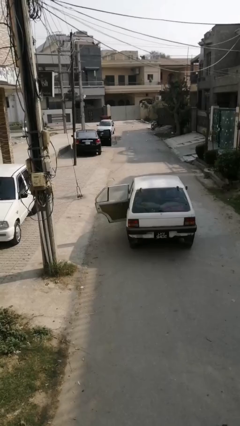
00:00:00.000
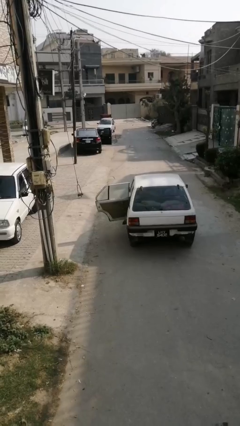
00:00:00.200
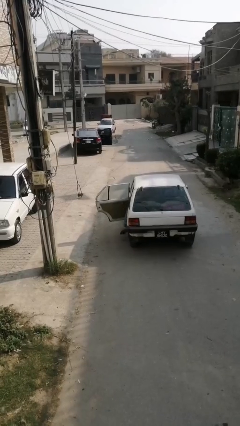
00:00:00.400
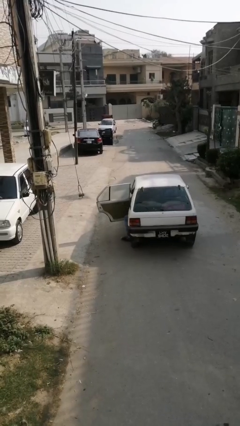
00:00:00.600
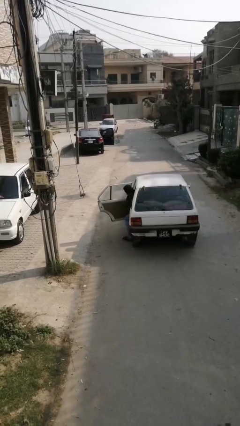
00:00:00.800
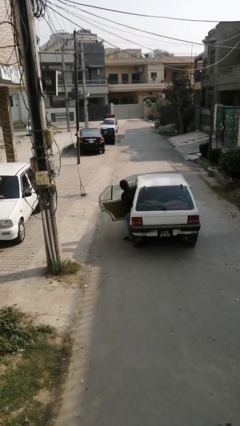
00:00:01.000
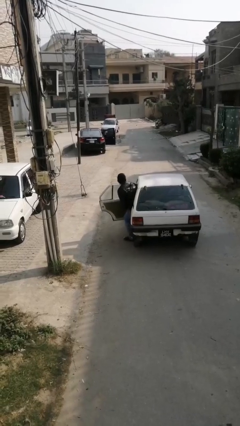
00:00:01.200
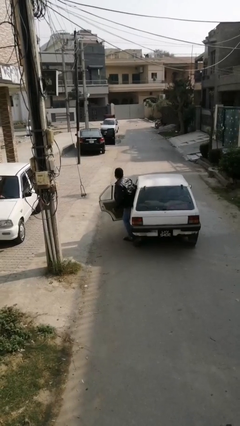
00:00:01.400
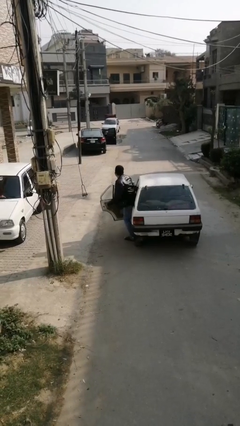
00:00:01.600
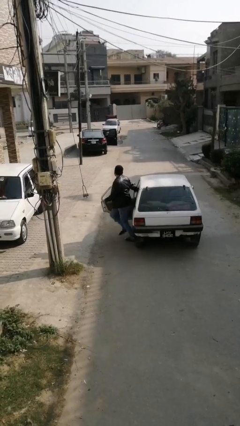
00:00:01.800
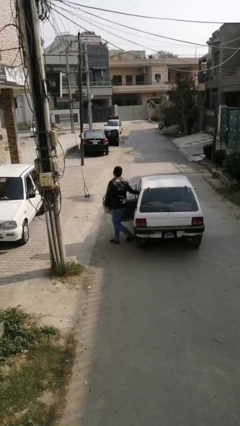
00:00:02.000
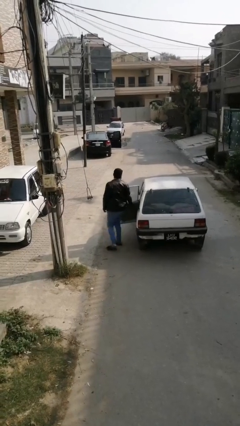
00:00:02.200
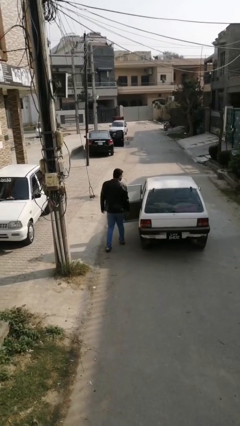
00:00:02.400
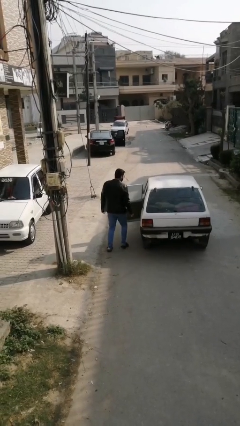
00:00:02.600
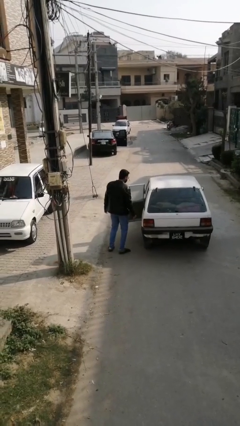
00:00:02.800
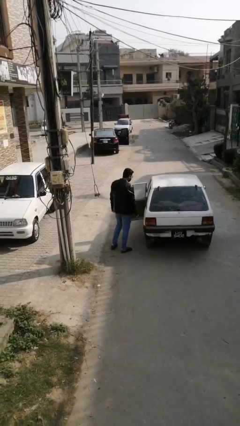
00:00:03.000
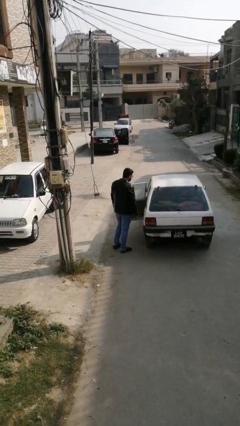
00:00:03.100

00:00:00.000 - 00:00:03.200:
person exits car

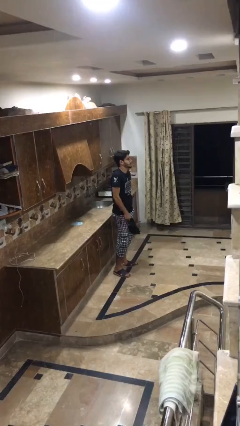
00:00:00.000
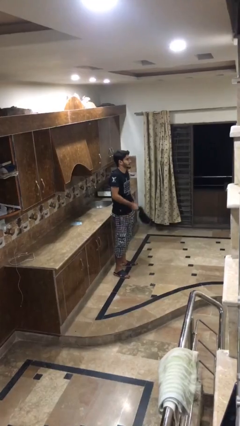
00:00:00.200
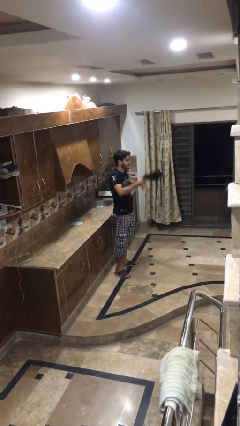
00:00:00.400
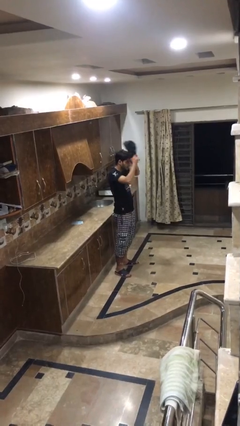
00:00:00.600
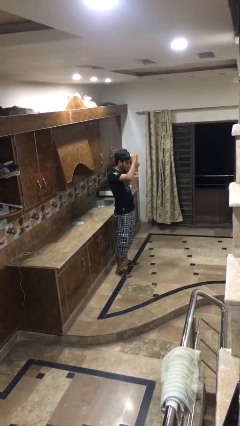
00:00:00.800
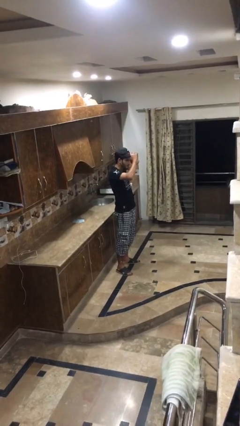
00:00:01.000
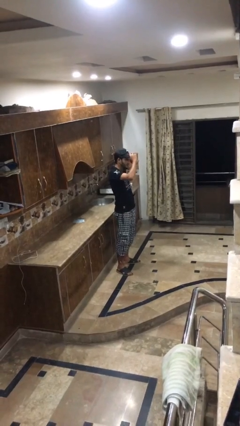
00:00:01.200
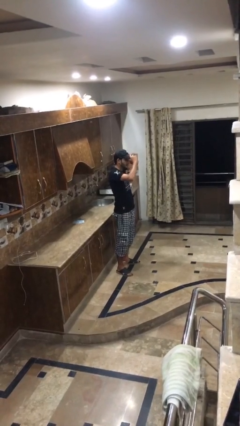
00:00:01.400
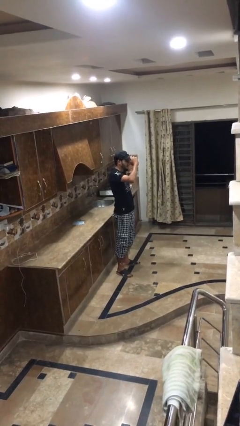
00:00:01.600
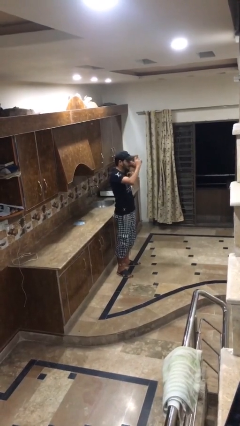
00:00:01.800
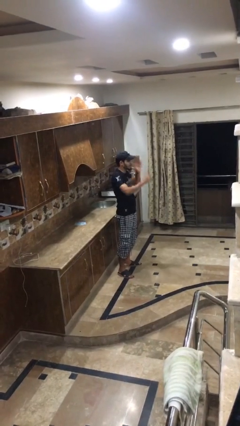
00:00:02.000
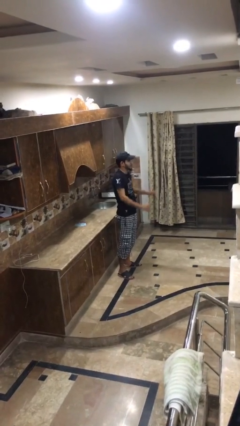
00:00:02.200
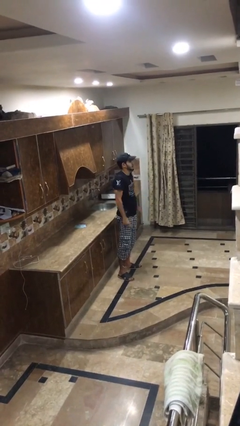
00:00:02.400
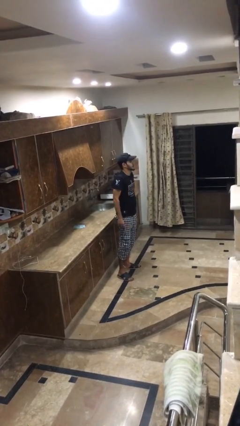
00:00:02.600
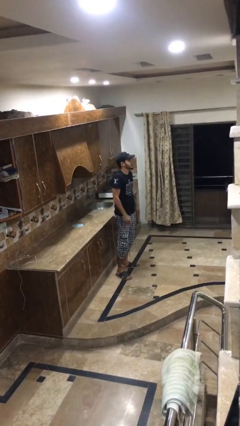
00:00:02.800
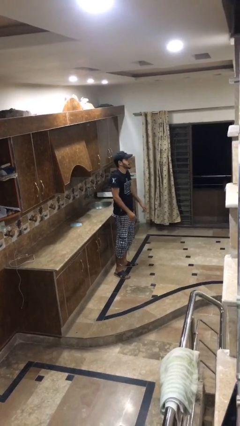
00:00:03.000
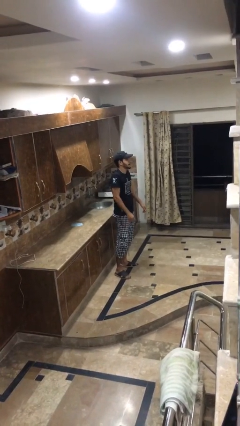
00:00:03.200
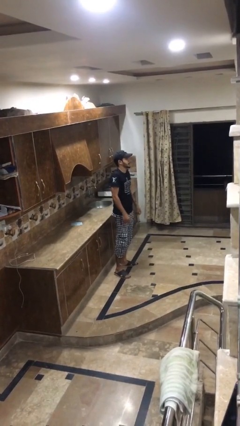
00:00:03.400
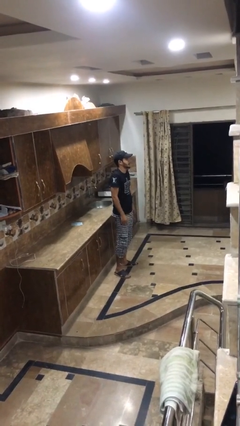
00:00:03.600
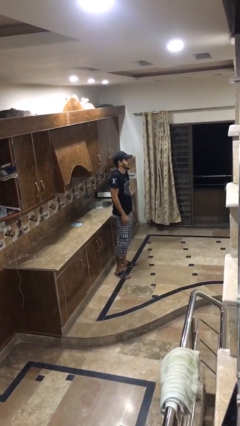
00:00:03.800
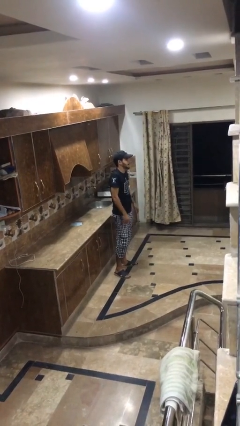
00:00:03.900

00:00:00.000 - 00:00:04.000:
person puts on hat

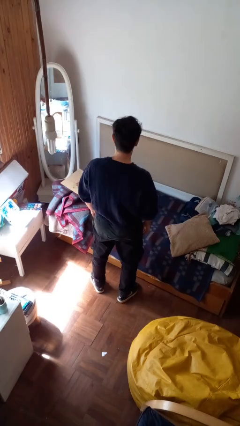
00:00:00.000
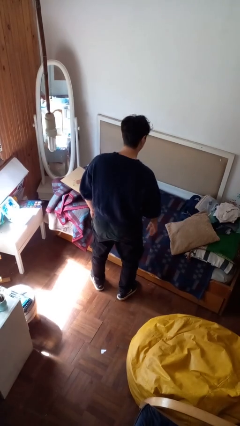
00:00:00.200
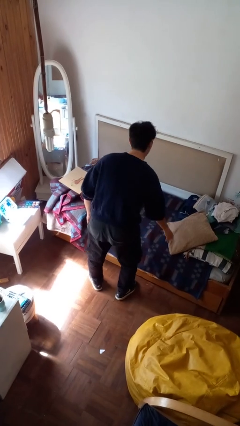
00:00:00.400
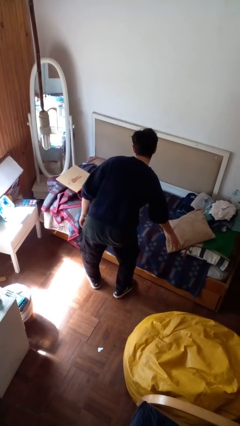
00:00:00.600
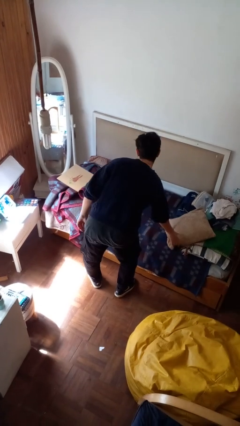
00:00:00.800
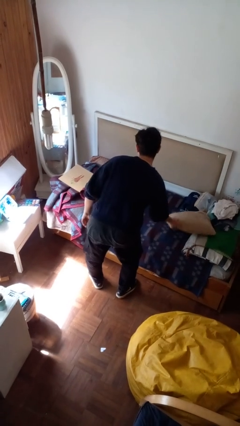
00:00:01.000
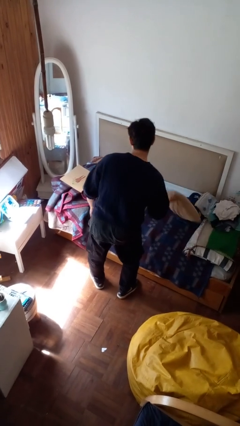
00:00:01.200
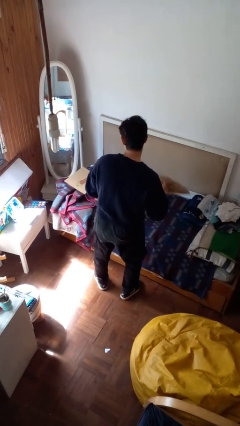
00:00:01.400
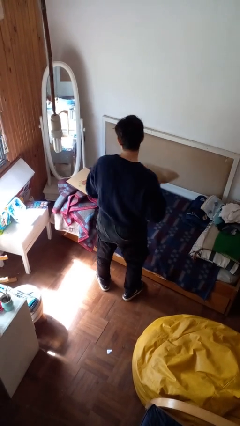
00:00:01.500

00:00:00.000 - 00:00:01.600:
person picks up object from bed

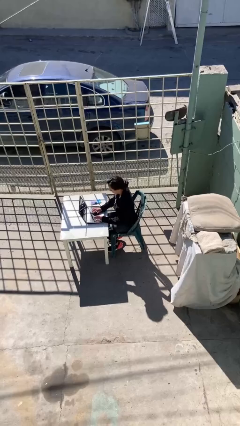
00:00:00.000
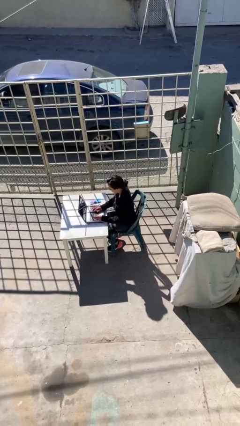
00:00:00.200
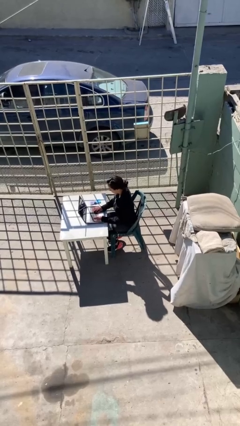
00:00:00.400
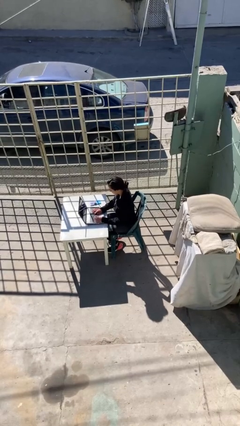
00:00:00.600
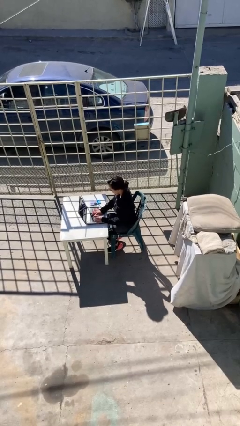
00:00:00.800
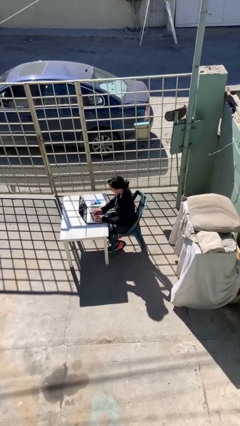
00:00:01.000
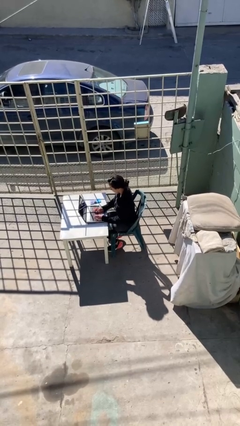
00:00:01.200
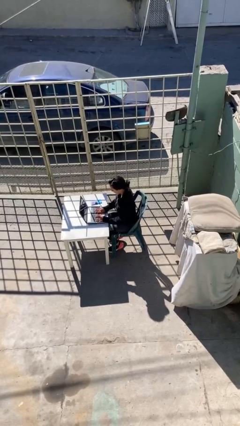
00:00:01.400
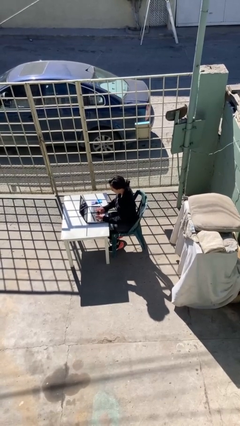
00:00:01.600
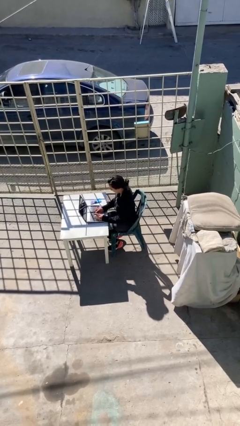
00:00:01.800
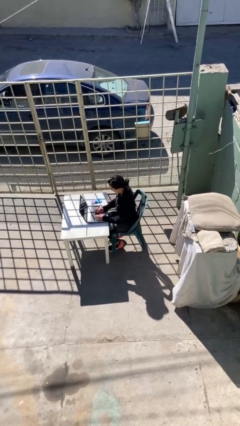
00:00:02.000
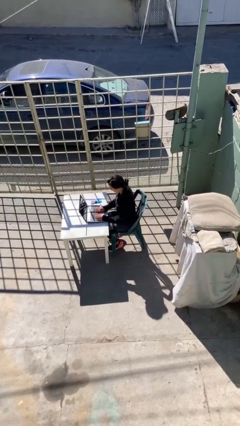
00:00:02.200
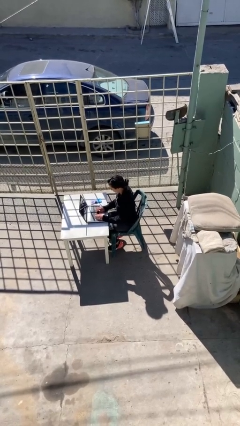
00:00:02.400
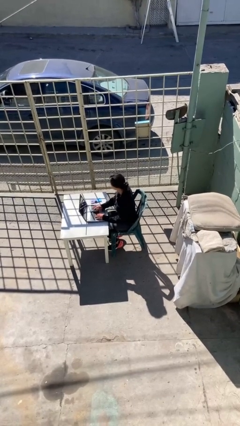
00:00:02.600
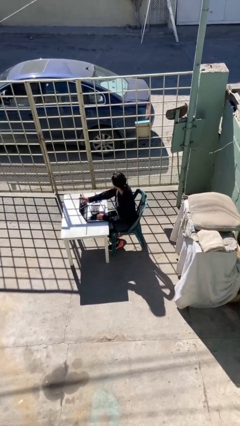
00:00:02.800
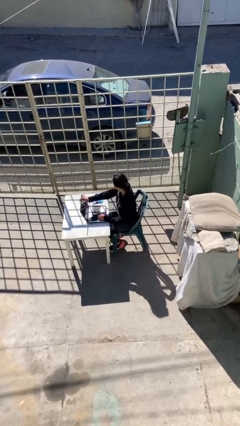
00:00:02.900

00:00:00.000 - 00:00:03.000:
person interacts with laptop

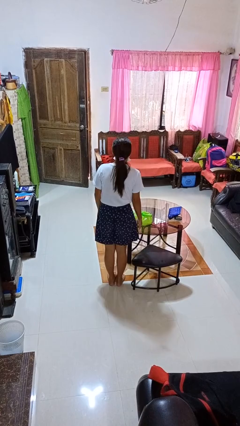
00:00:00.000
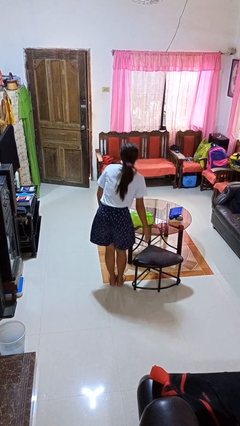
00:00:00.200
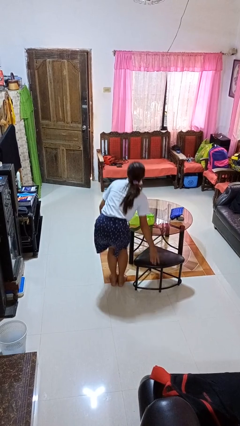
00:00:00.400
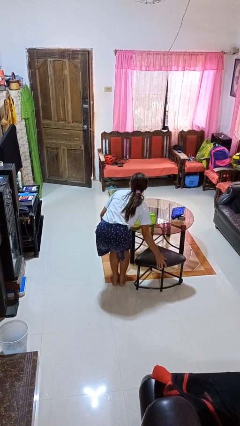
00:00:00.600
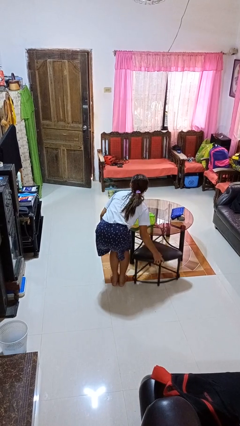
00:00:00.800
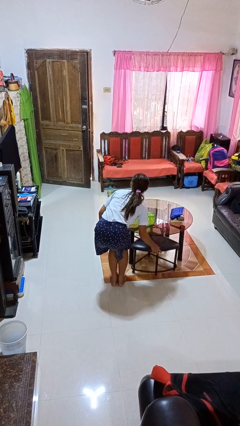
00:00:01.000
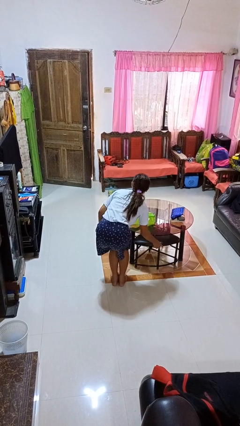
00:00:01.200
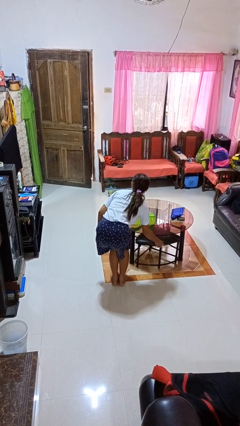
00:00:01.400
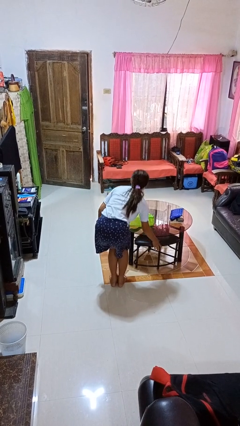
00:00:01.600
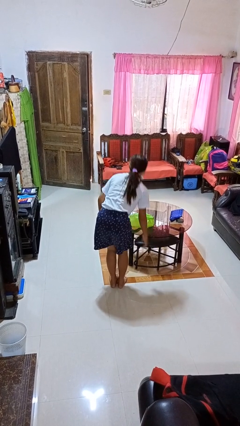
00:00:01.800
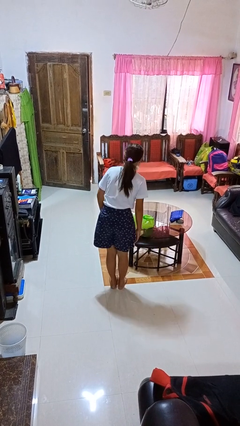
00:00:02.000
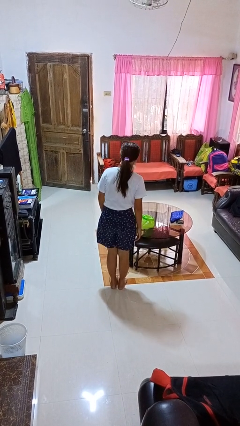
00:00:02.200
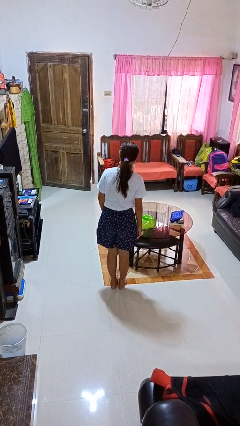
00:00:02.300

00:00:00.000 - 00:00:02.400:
person pushes in chair

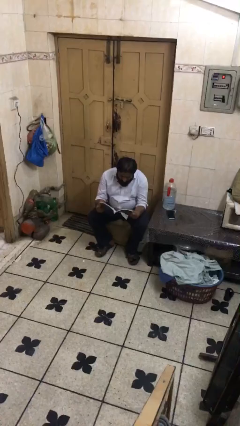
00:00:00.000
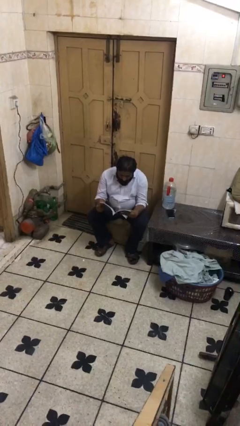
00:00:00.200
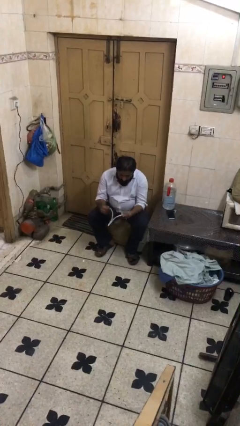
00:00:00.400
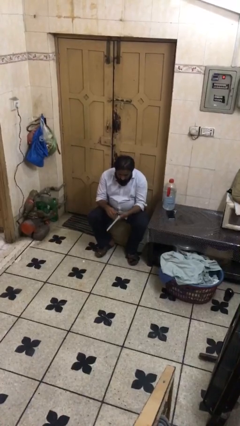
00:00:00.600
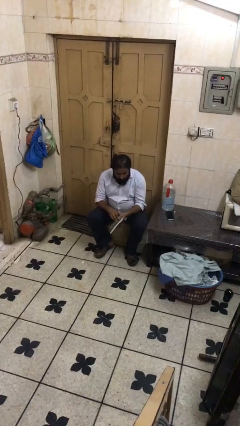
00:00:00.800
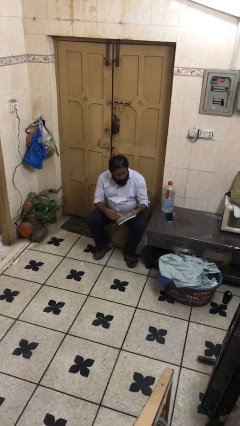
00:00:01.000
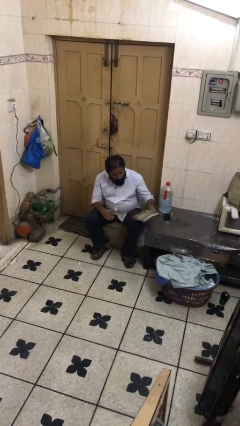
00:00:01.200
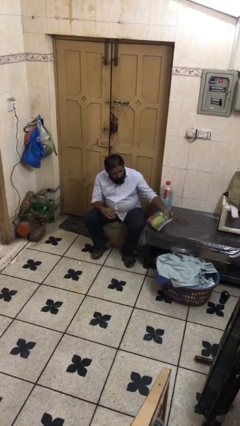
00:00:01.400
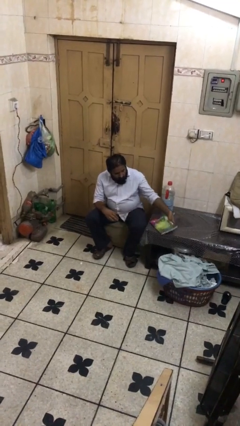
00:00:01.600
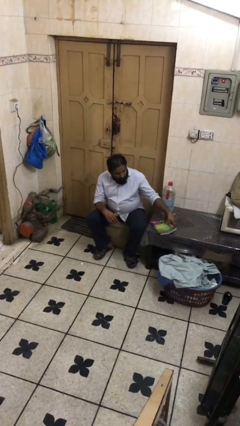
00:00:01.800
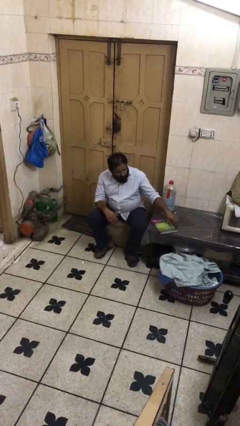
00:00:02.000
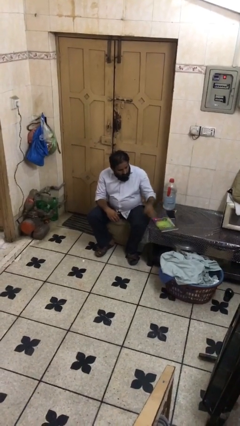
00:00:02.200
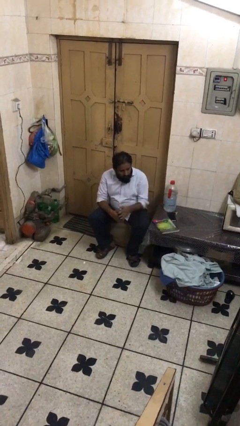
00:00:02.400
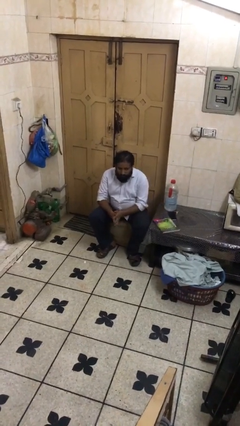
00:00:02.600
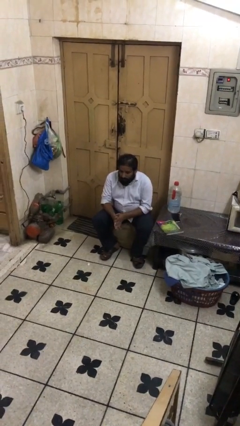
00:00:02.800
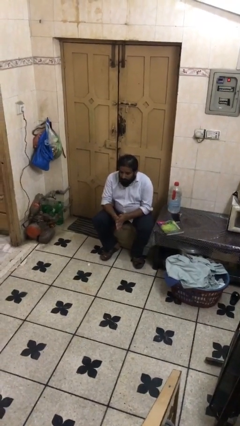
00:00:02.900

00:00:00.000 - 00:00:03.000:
person puts down object on table
